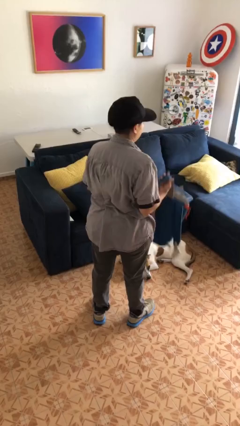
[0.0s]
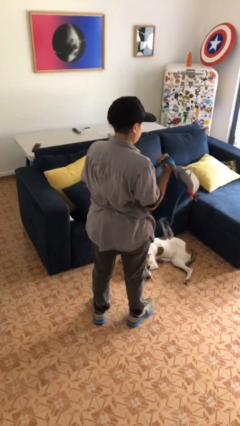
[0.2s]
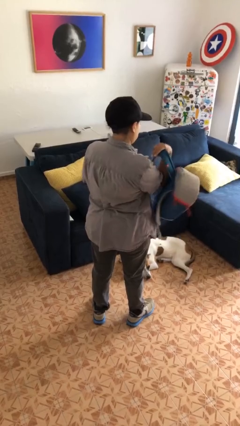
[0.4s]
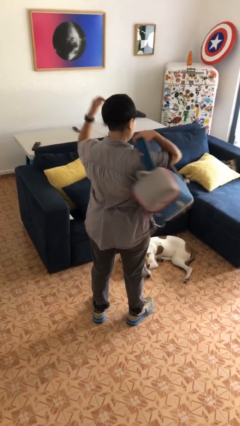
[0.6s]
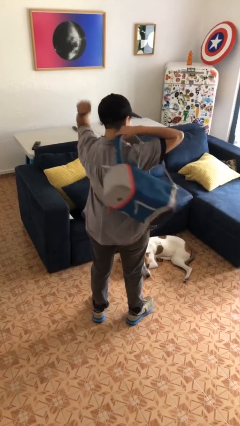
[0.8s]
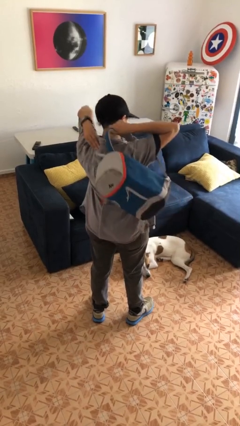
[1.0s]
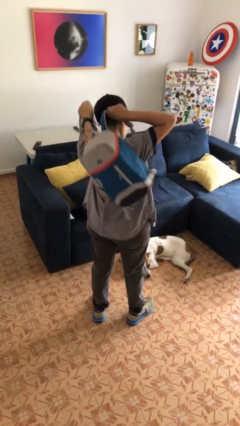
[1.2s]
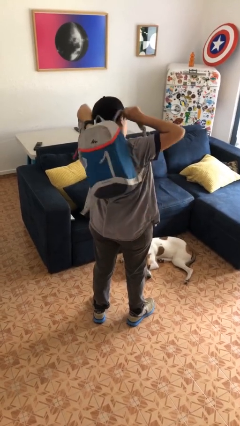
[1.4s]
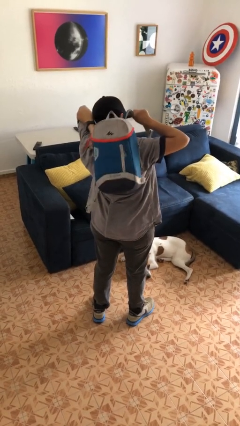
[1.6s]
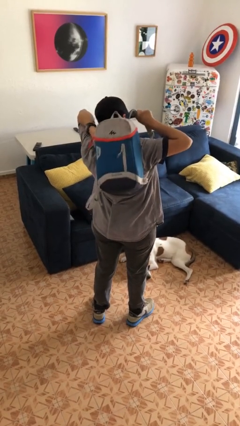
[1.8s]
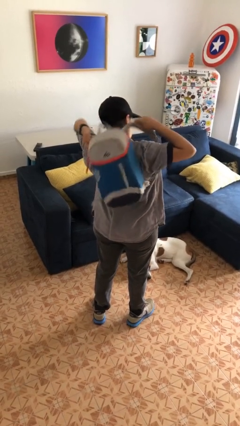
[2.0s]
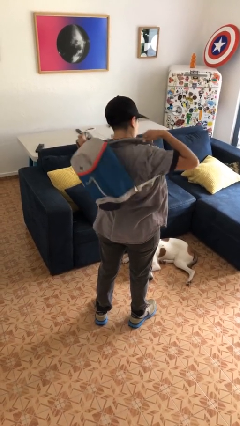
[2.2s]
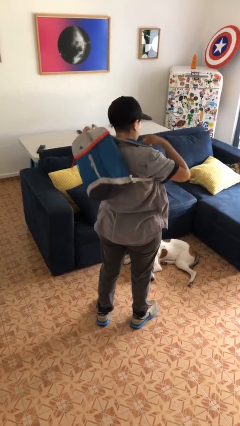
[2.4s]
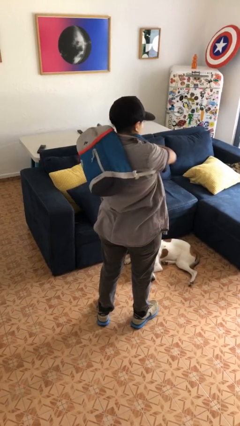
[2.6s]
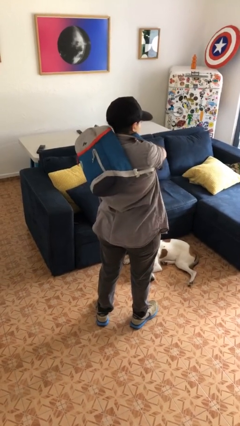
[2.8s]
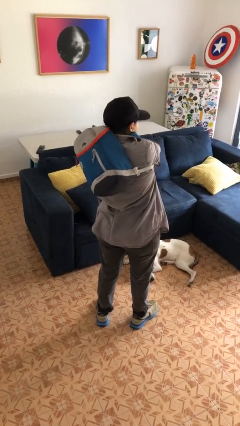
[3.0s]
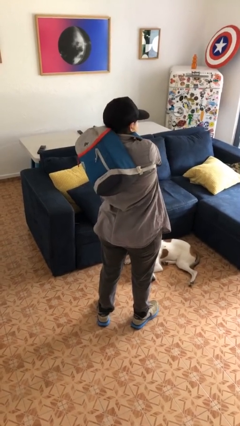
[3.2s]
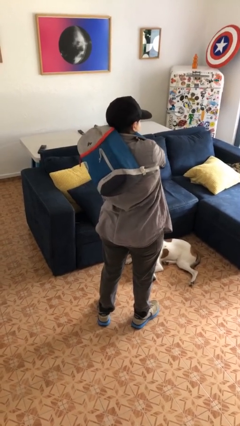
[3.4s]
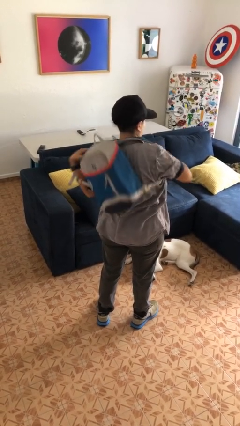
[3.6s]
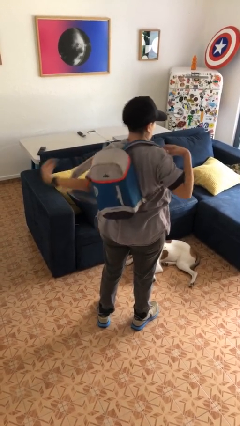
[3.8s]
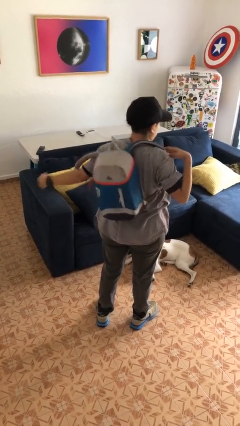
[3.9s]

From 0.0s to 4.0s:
person puts on backpack

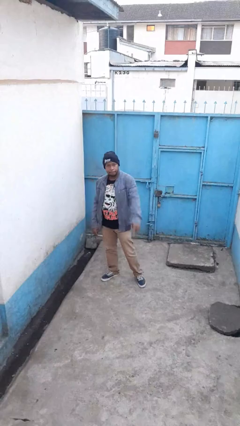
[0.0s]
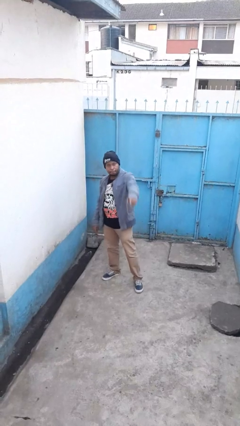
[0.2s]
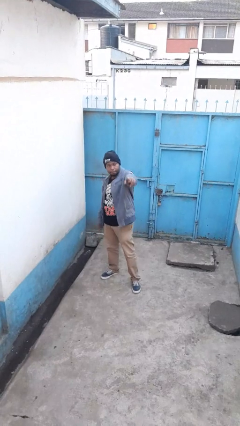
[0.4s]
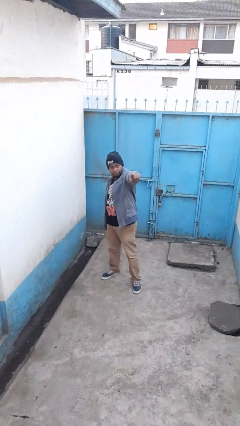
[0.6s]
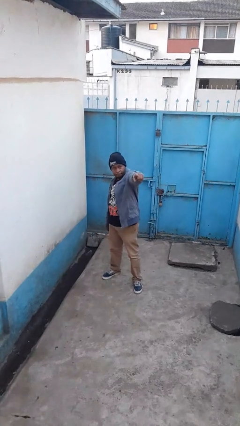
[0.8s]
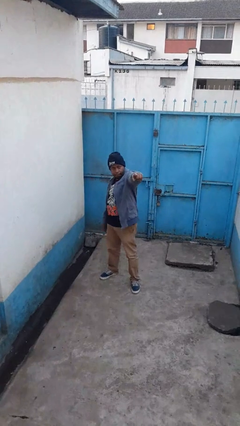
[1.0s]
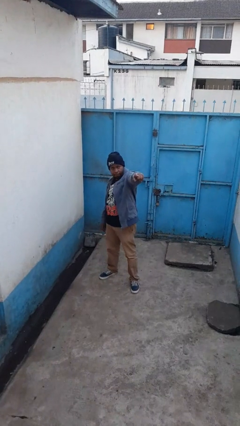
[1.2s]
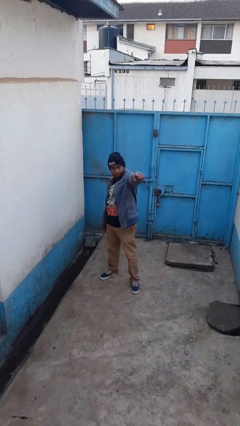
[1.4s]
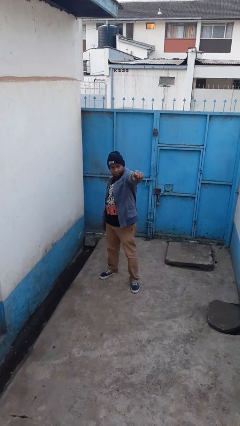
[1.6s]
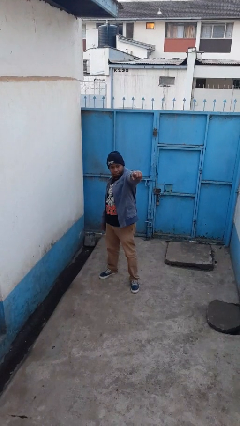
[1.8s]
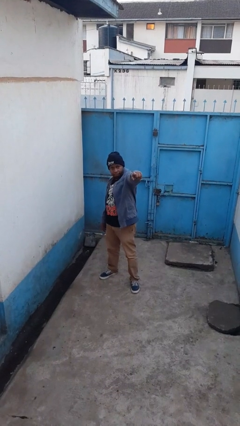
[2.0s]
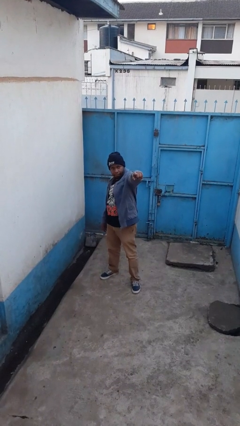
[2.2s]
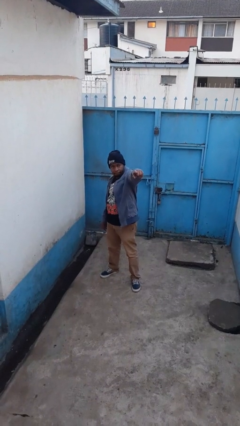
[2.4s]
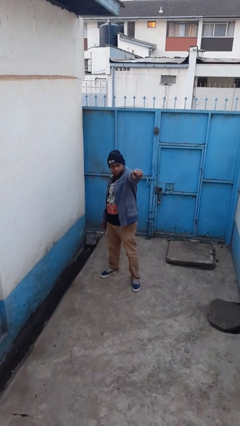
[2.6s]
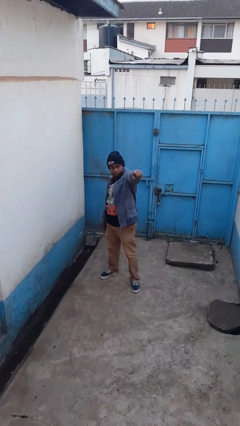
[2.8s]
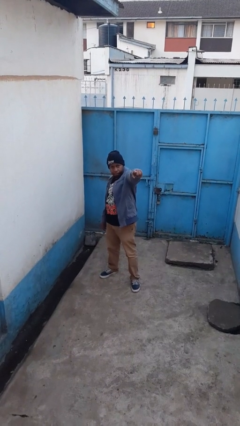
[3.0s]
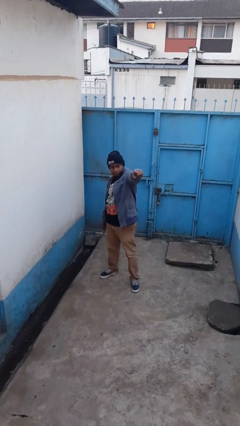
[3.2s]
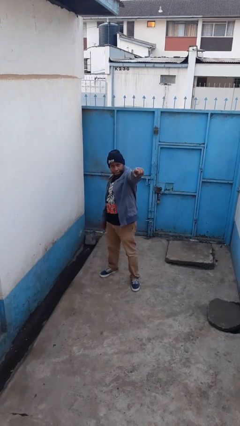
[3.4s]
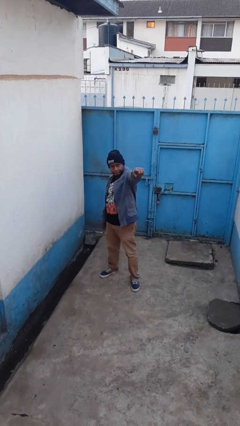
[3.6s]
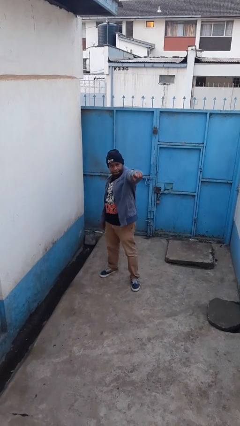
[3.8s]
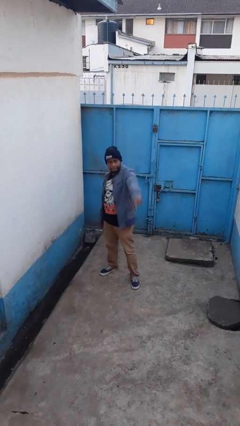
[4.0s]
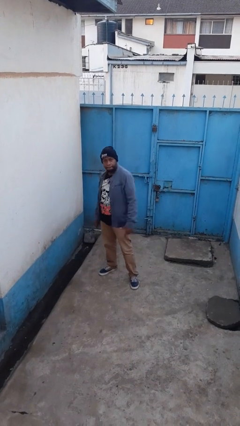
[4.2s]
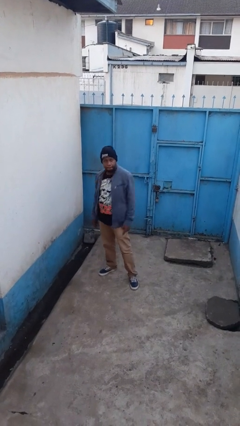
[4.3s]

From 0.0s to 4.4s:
person points at person

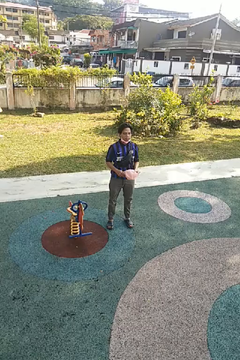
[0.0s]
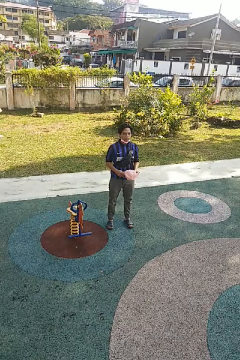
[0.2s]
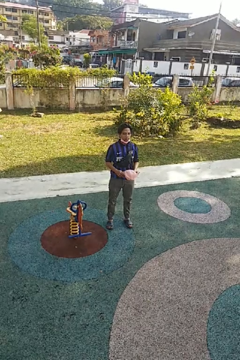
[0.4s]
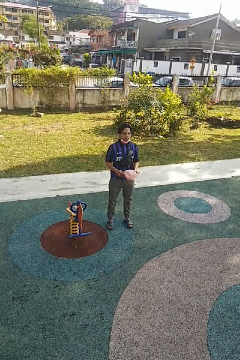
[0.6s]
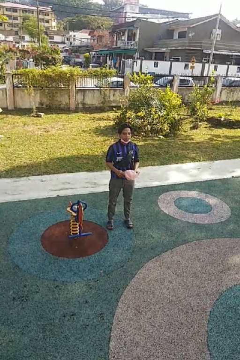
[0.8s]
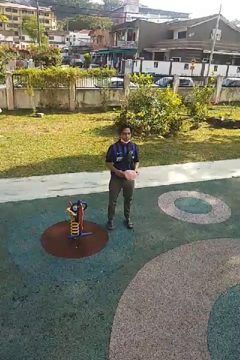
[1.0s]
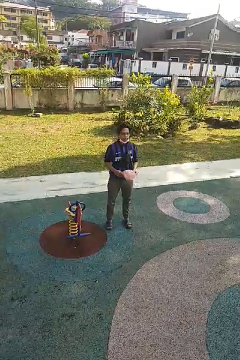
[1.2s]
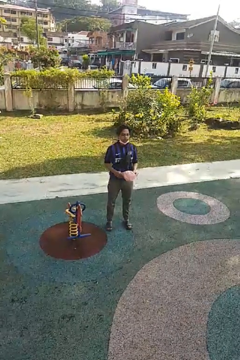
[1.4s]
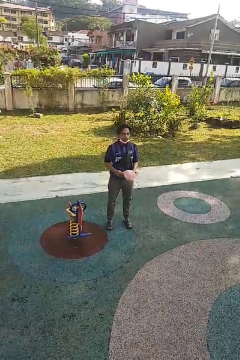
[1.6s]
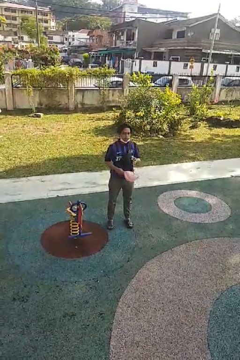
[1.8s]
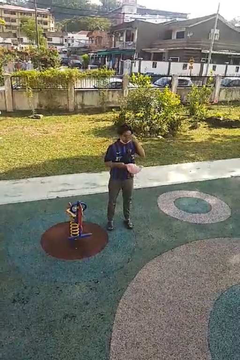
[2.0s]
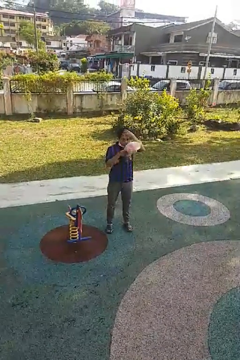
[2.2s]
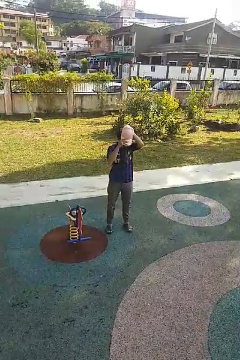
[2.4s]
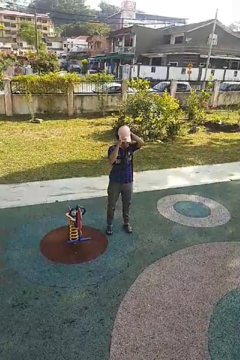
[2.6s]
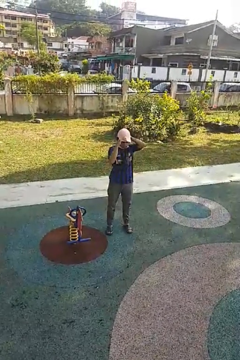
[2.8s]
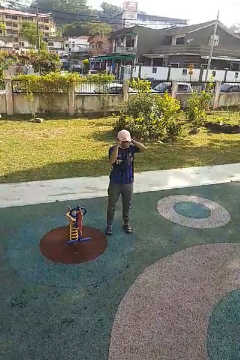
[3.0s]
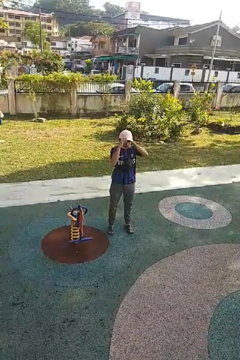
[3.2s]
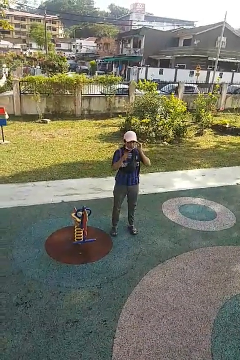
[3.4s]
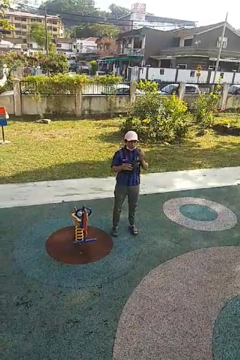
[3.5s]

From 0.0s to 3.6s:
person puts on hat

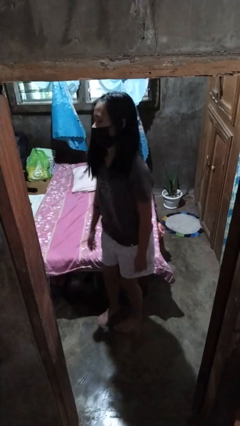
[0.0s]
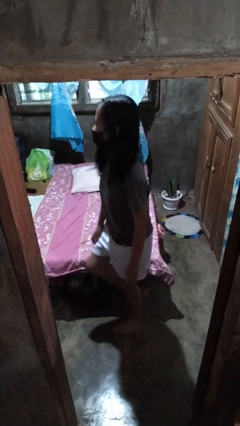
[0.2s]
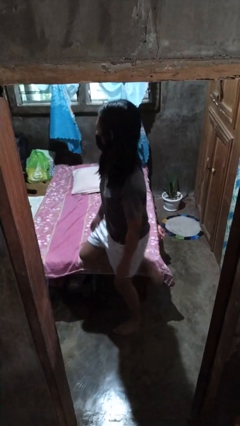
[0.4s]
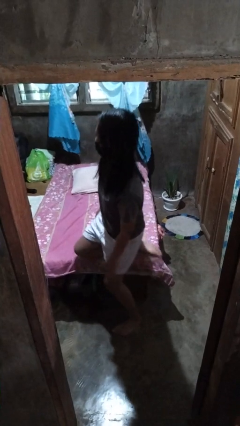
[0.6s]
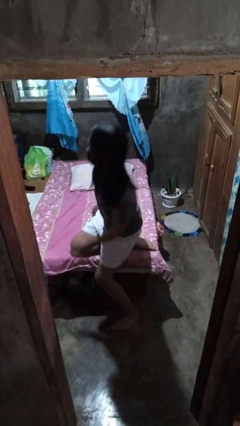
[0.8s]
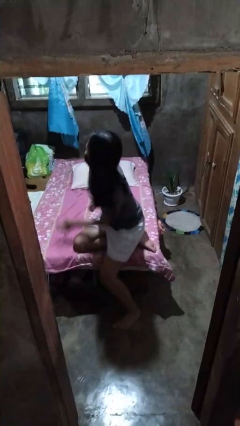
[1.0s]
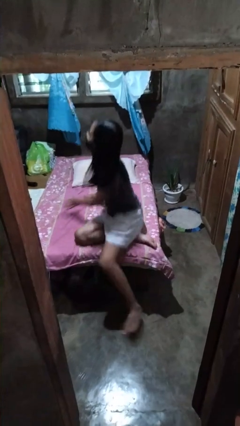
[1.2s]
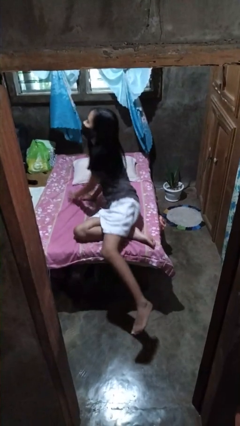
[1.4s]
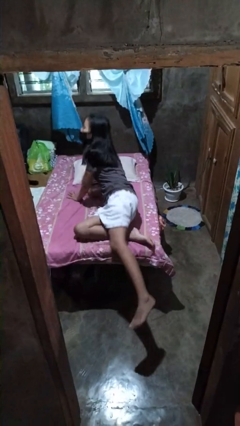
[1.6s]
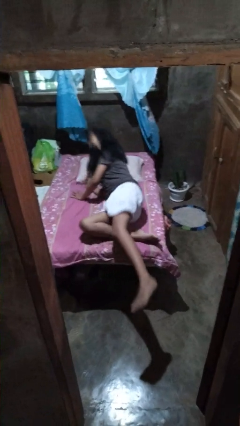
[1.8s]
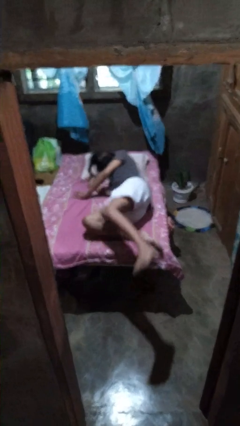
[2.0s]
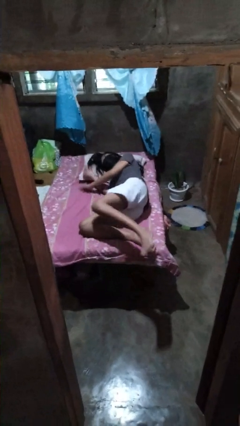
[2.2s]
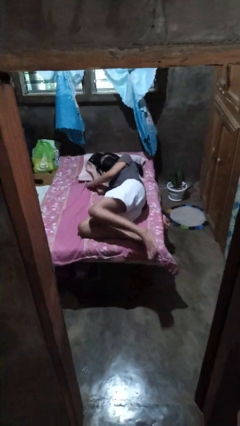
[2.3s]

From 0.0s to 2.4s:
person lies down on bed

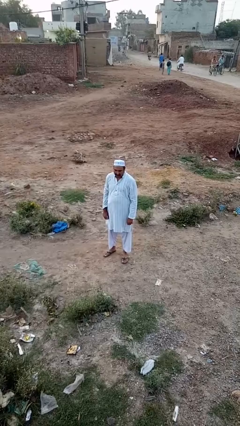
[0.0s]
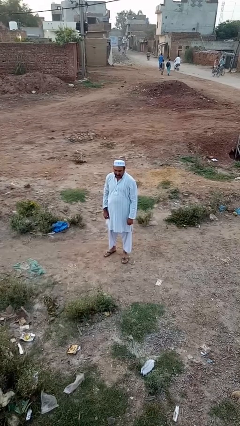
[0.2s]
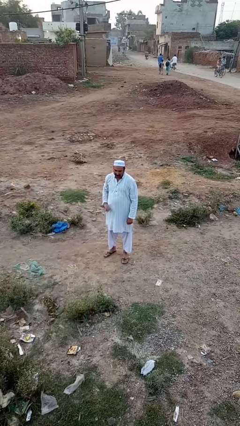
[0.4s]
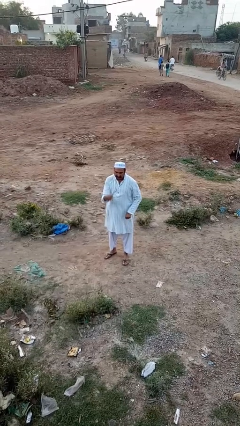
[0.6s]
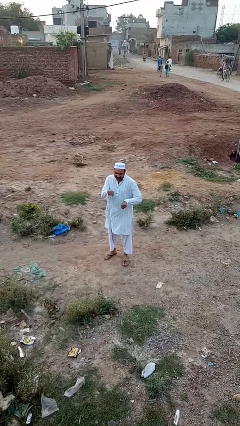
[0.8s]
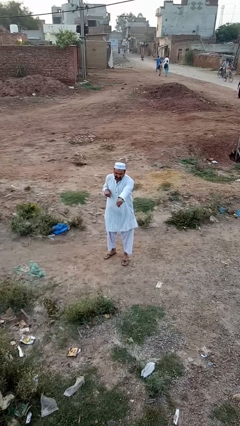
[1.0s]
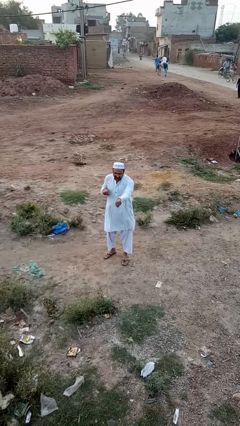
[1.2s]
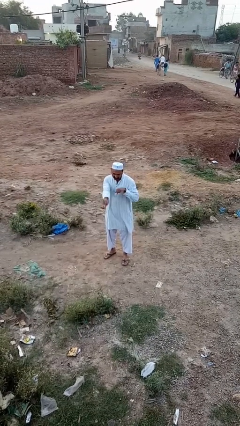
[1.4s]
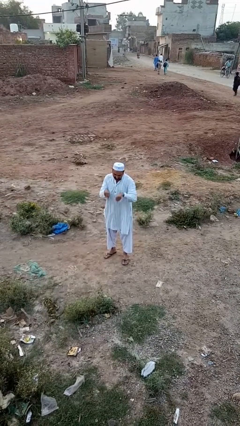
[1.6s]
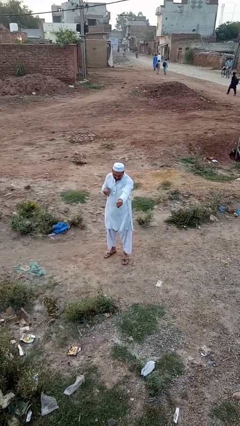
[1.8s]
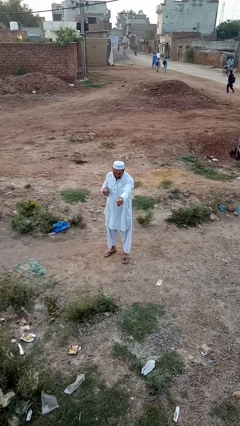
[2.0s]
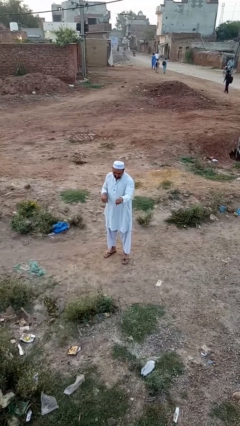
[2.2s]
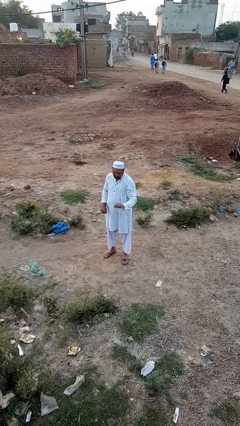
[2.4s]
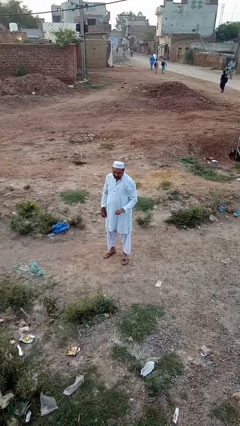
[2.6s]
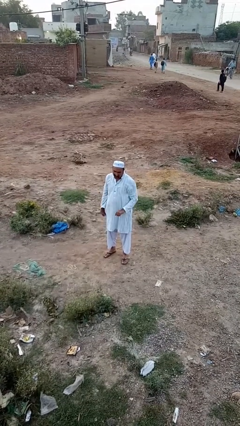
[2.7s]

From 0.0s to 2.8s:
person punches

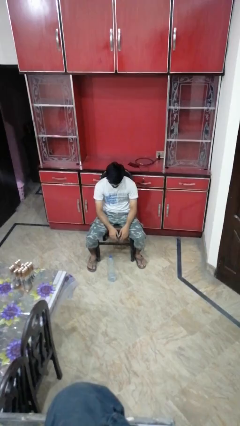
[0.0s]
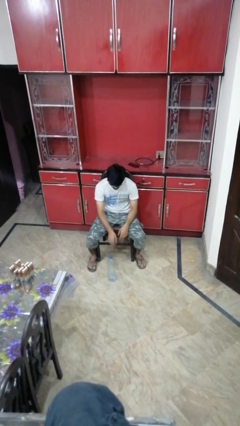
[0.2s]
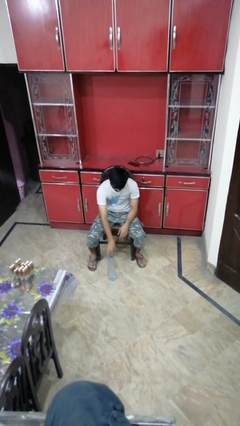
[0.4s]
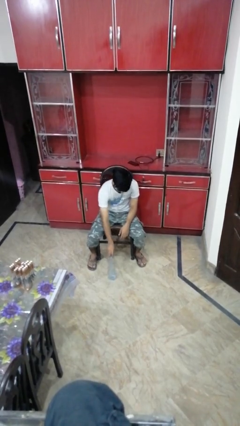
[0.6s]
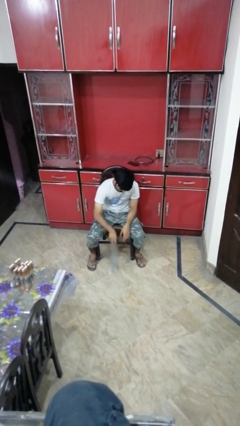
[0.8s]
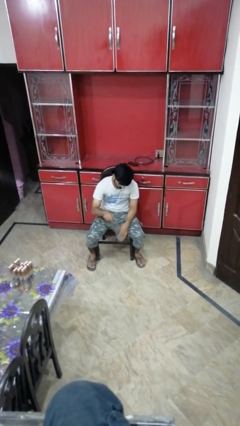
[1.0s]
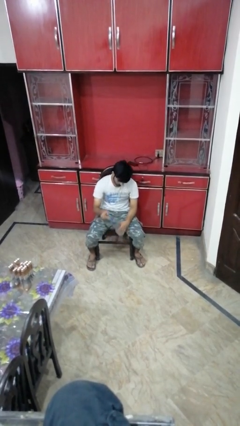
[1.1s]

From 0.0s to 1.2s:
person picks up object from floor
